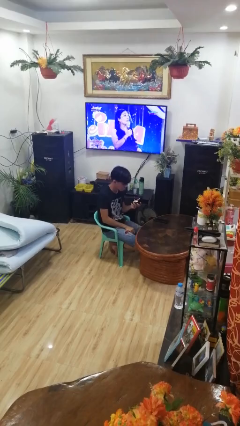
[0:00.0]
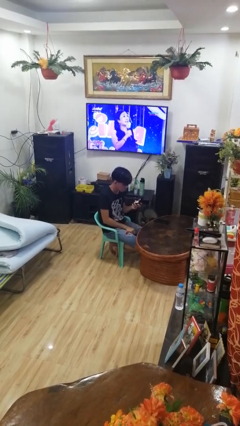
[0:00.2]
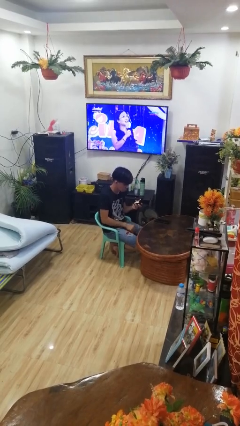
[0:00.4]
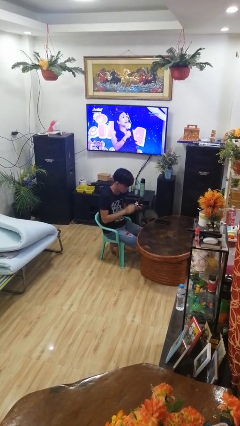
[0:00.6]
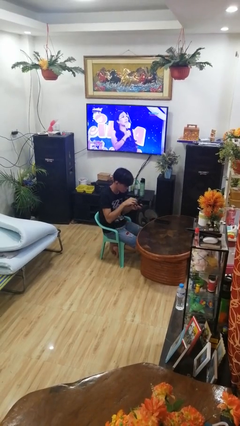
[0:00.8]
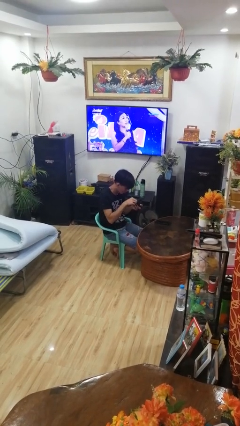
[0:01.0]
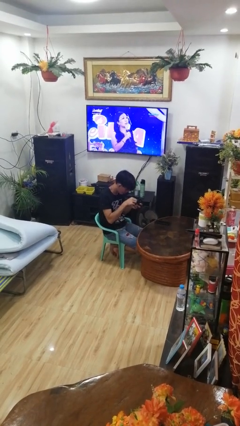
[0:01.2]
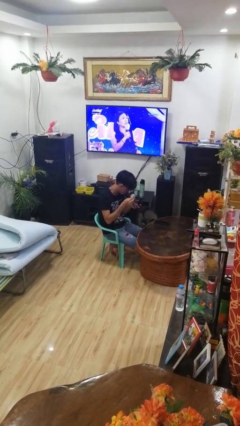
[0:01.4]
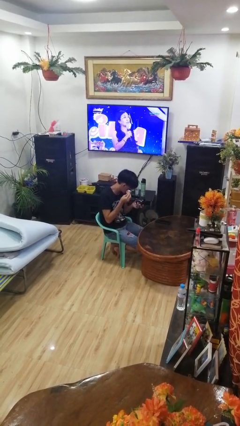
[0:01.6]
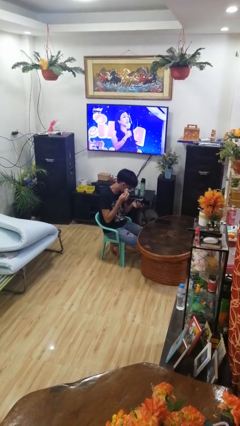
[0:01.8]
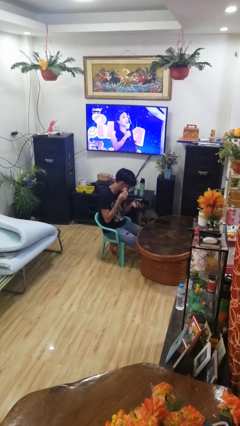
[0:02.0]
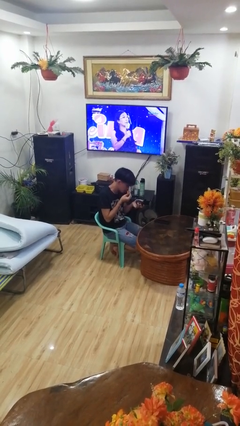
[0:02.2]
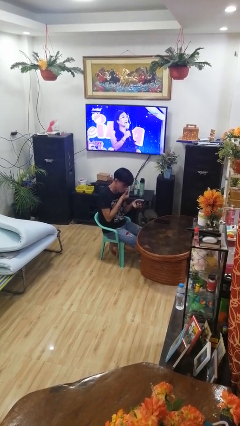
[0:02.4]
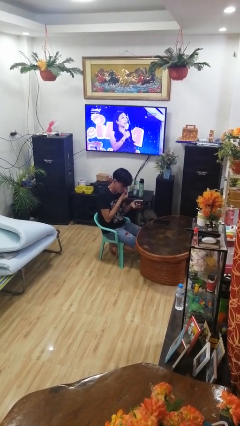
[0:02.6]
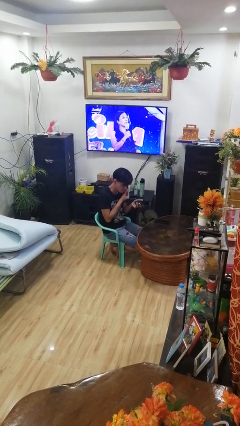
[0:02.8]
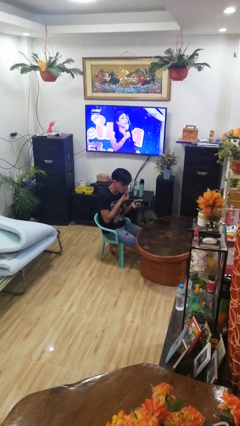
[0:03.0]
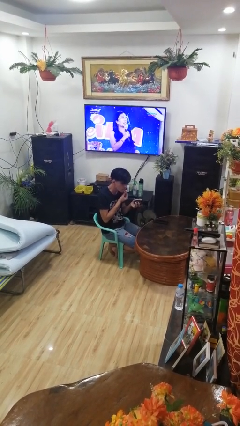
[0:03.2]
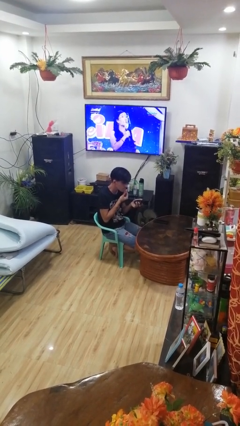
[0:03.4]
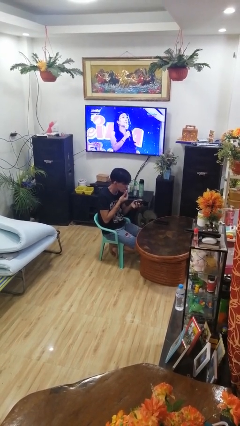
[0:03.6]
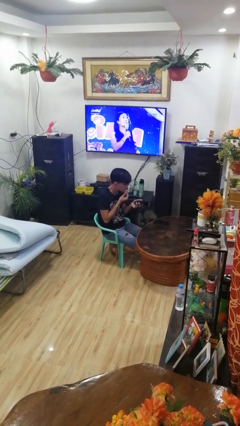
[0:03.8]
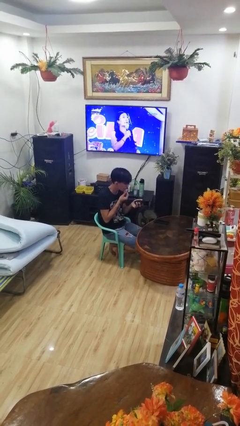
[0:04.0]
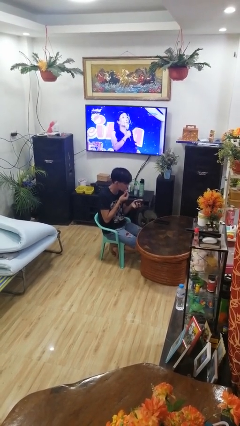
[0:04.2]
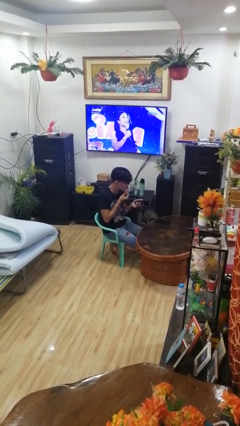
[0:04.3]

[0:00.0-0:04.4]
person applies foundation makeup

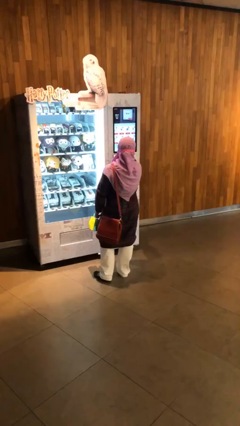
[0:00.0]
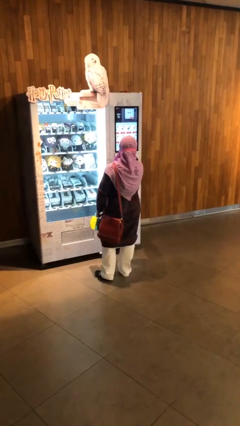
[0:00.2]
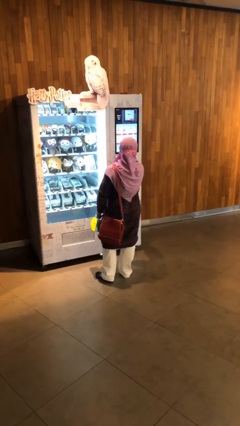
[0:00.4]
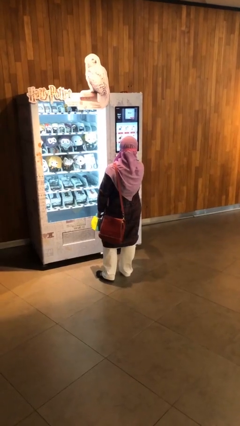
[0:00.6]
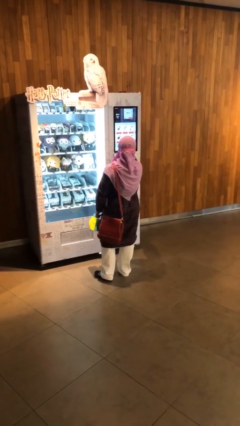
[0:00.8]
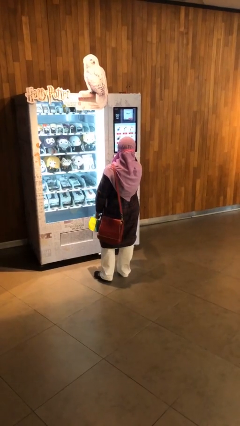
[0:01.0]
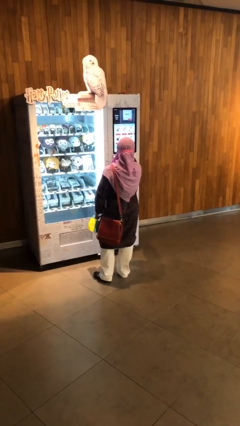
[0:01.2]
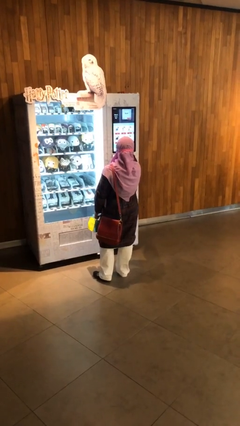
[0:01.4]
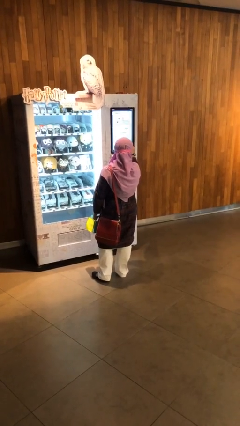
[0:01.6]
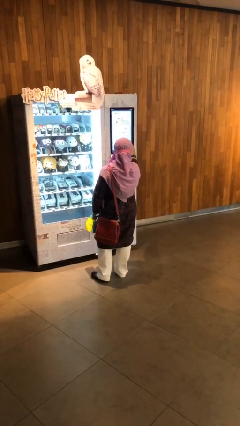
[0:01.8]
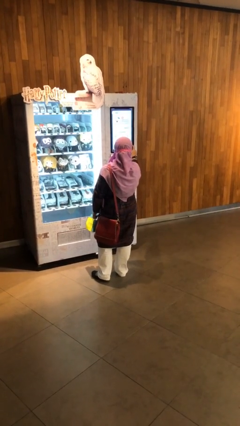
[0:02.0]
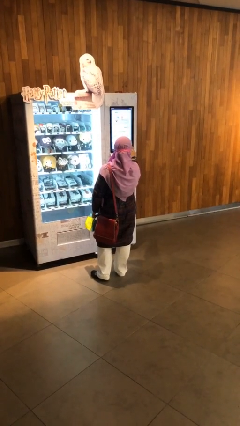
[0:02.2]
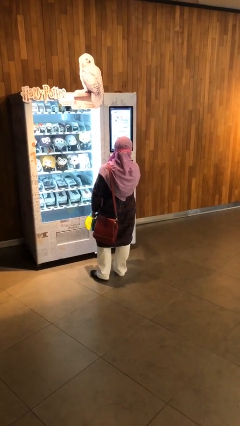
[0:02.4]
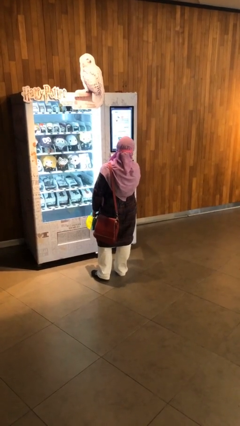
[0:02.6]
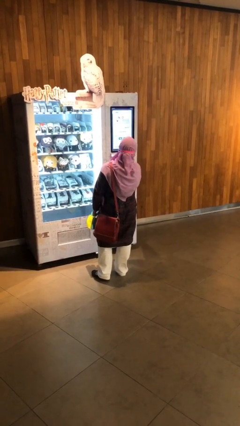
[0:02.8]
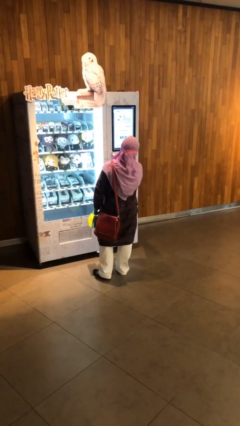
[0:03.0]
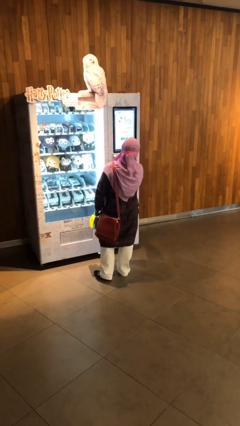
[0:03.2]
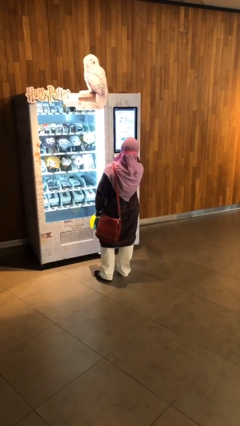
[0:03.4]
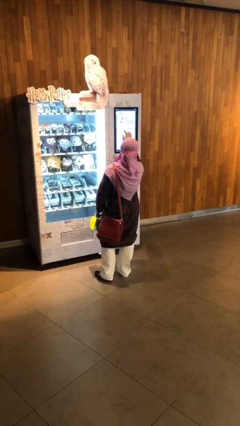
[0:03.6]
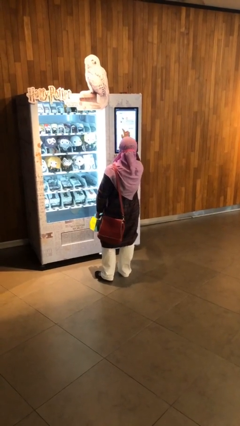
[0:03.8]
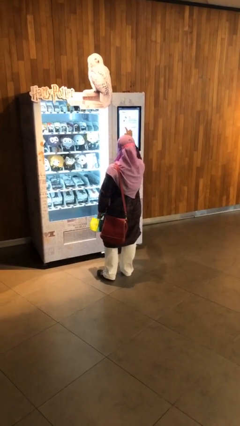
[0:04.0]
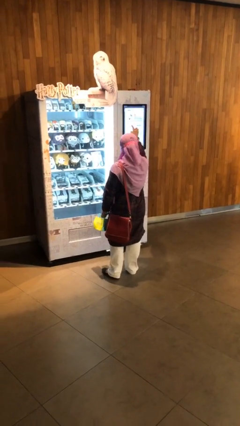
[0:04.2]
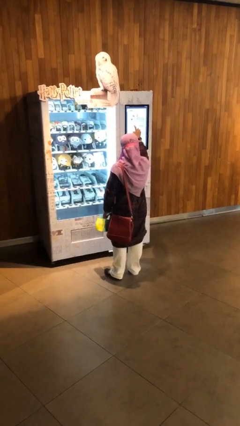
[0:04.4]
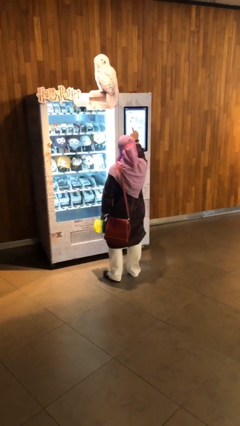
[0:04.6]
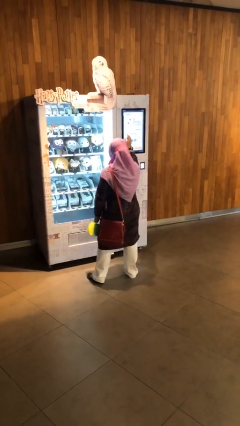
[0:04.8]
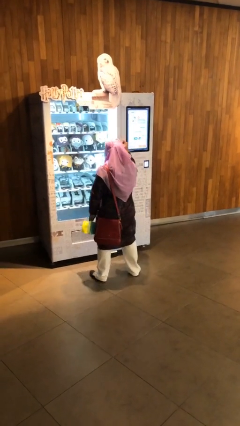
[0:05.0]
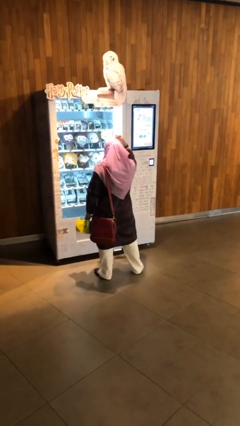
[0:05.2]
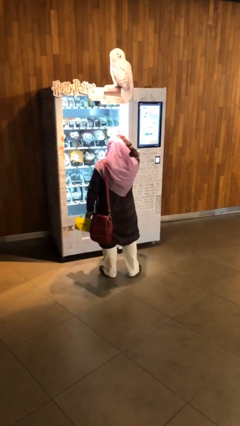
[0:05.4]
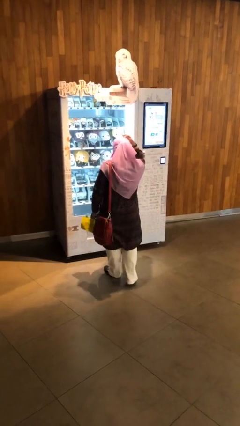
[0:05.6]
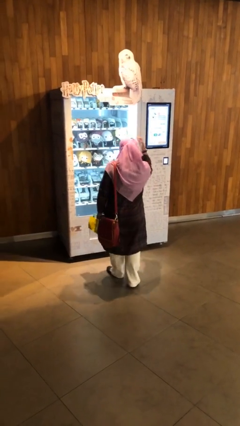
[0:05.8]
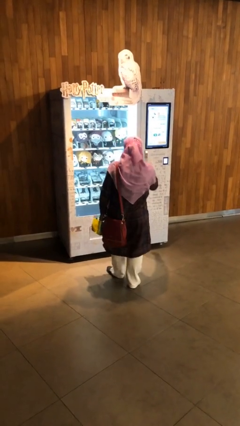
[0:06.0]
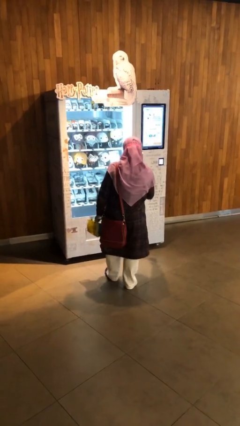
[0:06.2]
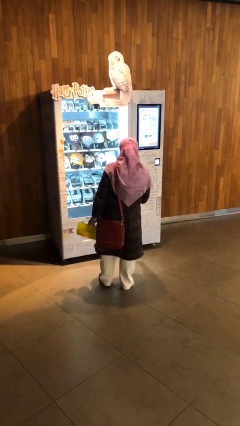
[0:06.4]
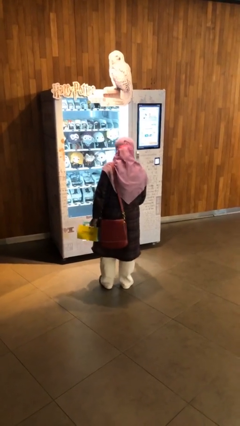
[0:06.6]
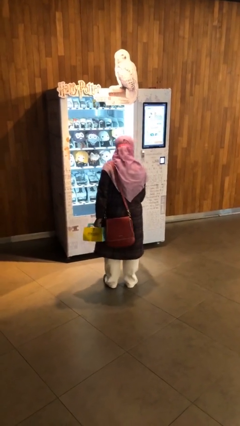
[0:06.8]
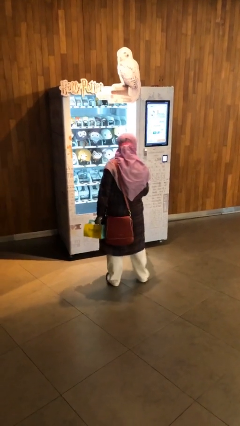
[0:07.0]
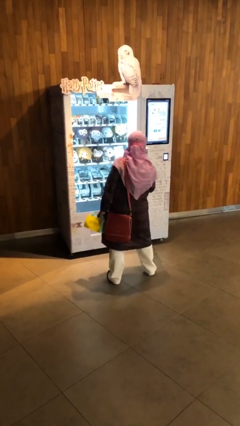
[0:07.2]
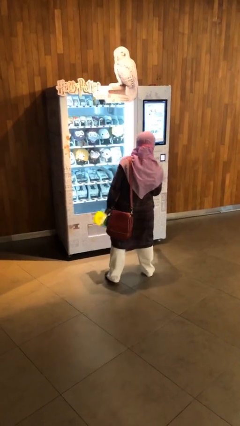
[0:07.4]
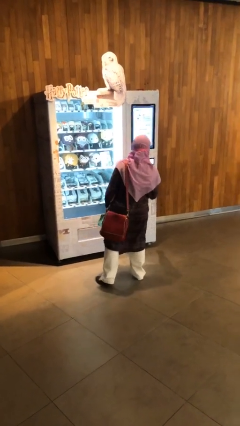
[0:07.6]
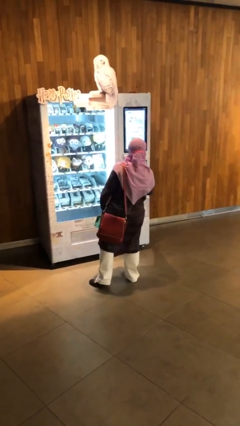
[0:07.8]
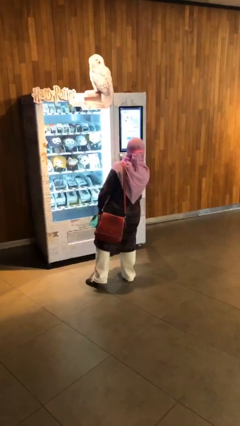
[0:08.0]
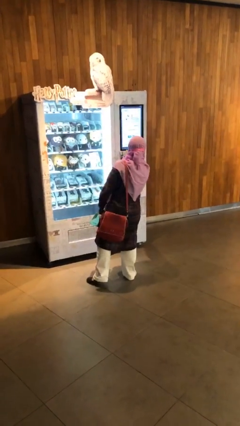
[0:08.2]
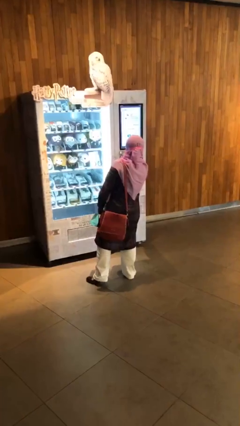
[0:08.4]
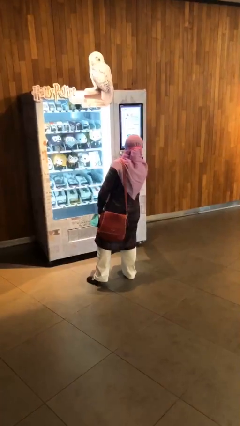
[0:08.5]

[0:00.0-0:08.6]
person purchases from machine

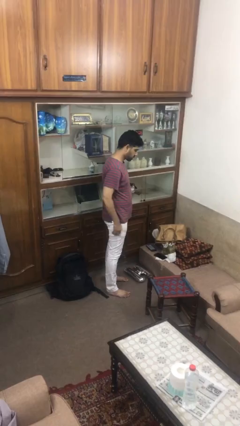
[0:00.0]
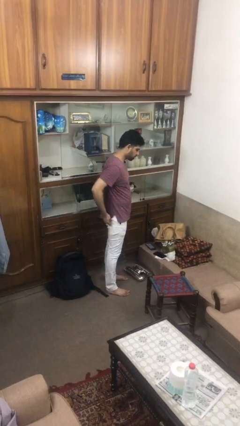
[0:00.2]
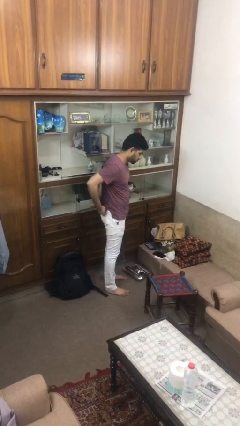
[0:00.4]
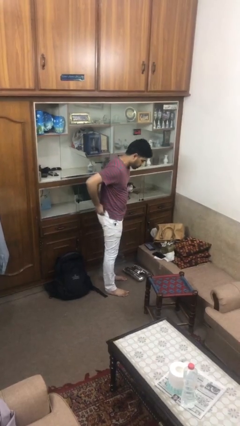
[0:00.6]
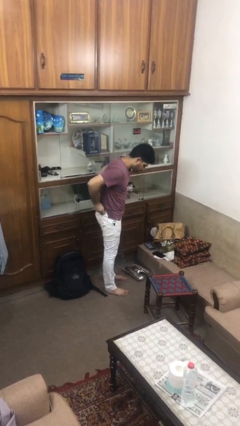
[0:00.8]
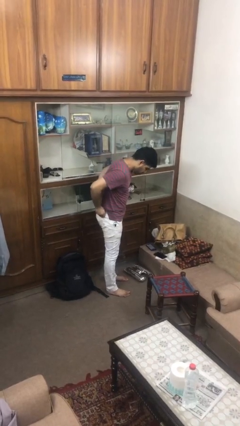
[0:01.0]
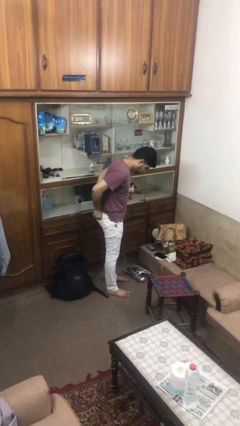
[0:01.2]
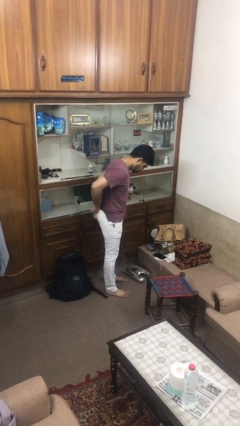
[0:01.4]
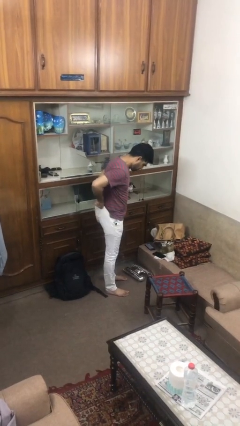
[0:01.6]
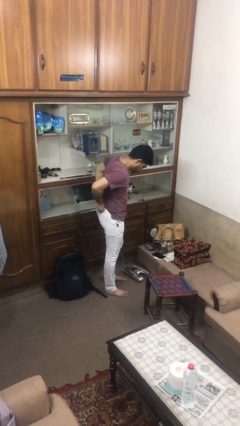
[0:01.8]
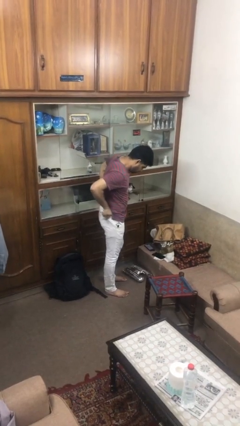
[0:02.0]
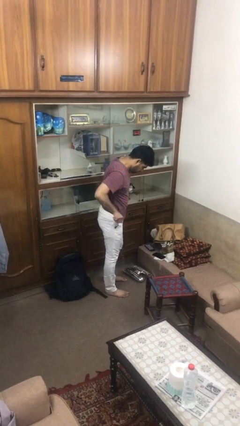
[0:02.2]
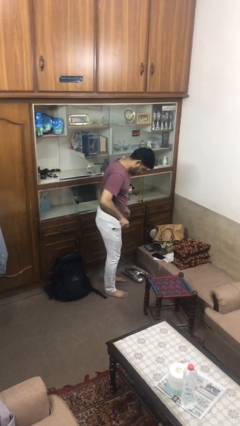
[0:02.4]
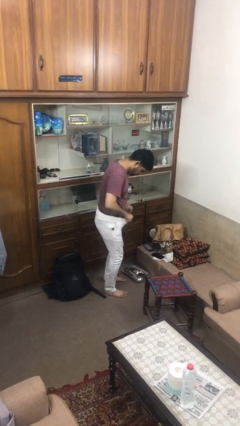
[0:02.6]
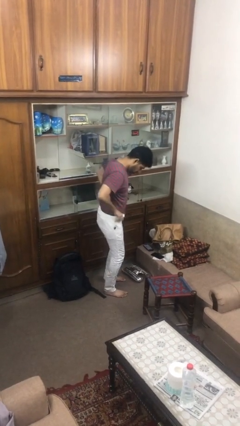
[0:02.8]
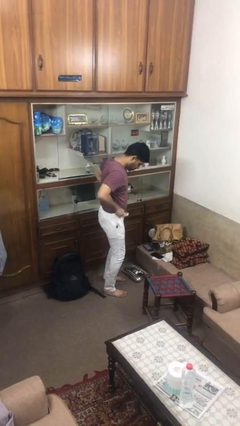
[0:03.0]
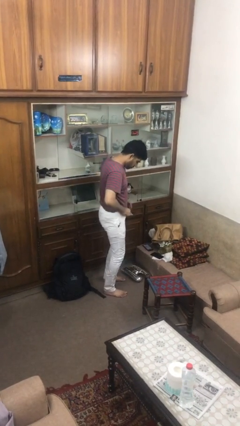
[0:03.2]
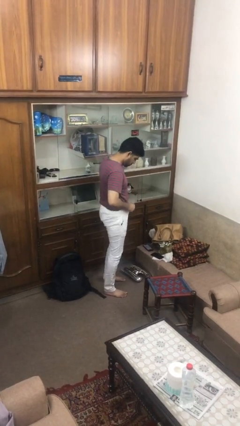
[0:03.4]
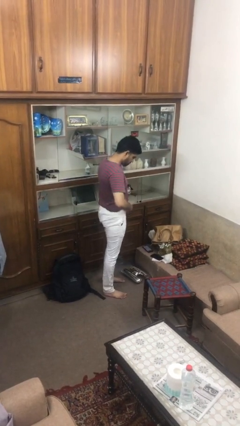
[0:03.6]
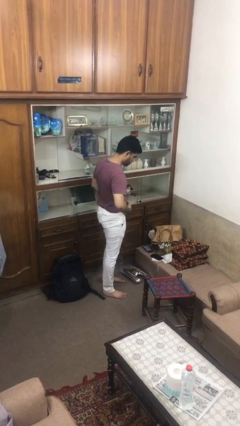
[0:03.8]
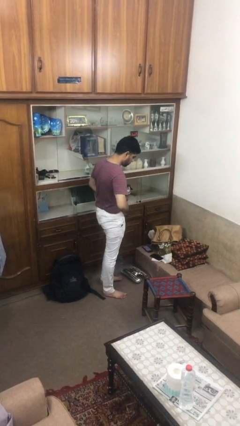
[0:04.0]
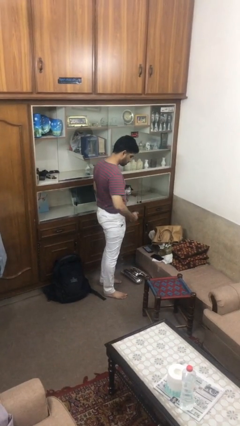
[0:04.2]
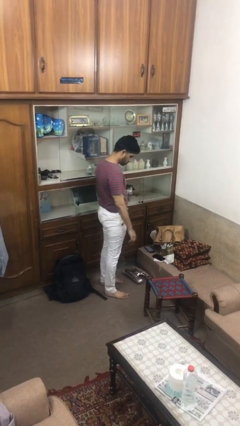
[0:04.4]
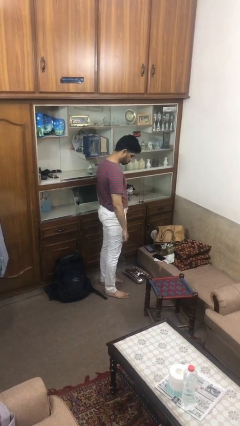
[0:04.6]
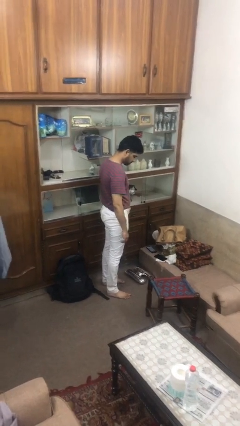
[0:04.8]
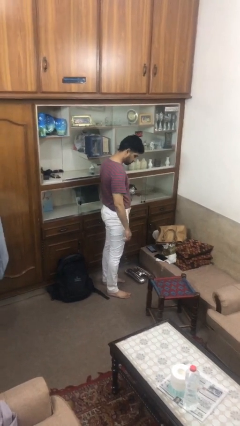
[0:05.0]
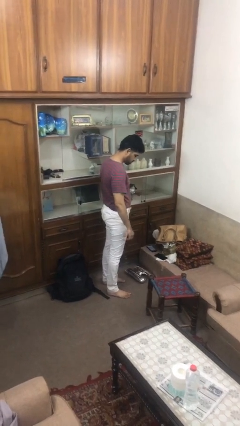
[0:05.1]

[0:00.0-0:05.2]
person tucks in shirt
